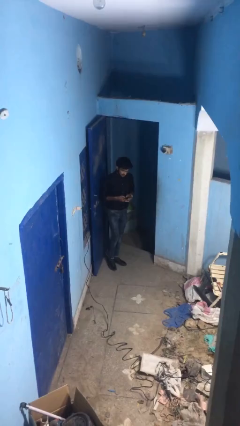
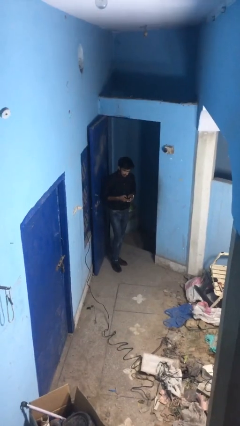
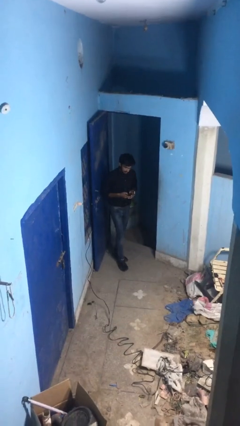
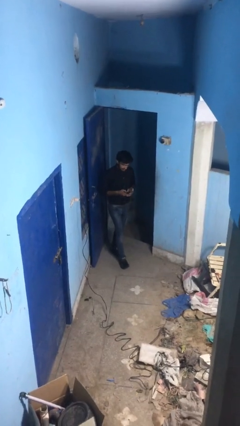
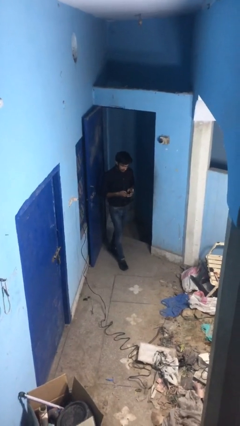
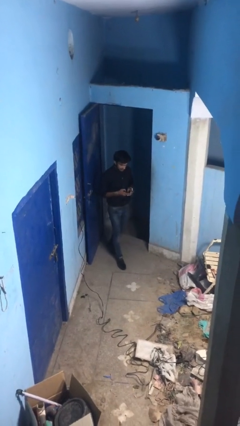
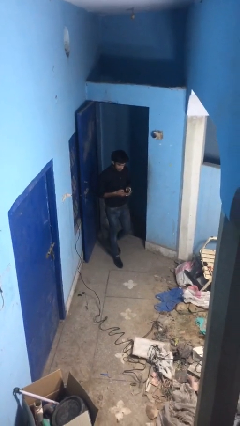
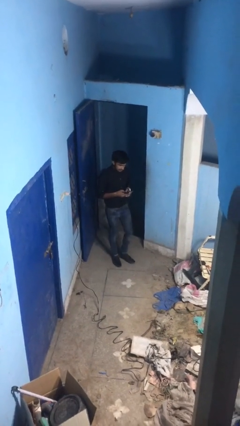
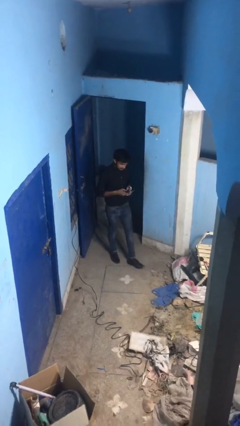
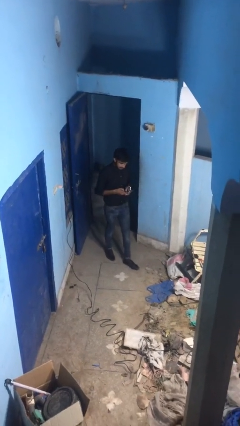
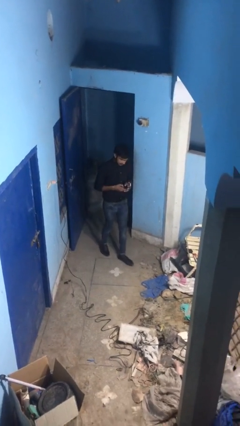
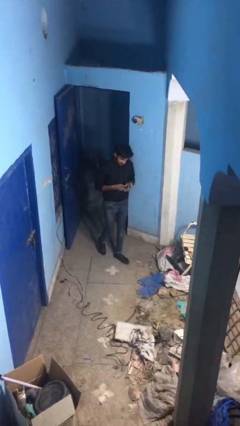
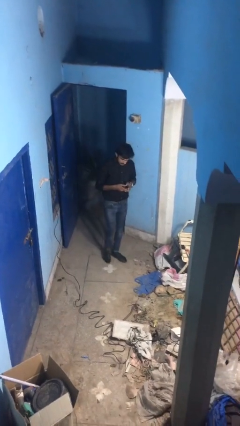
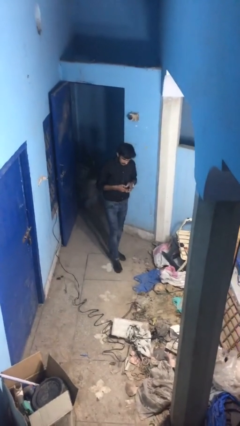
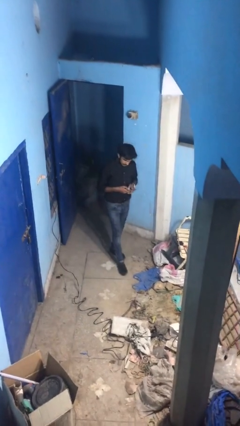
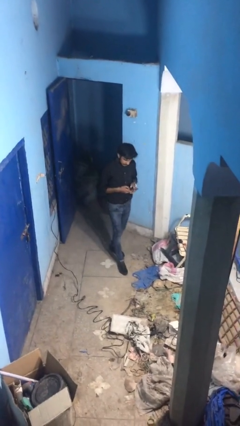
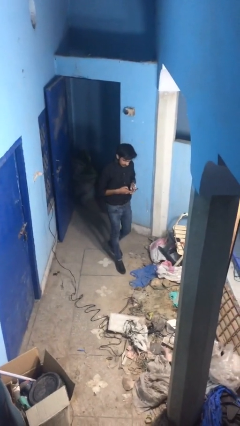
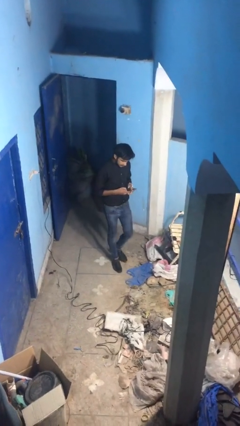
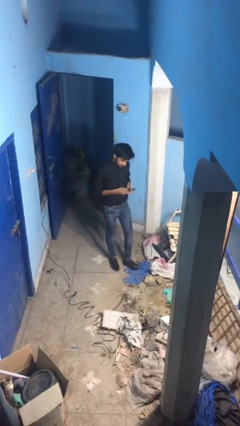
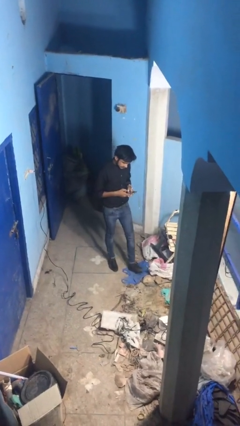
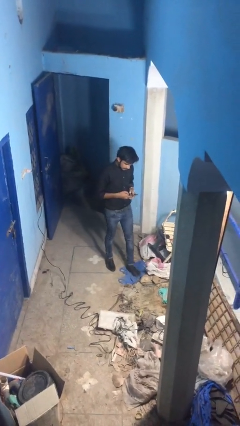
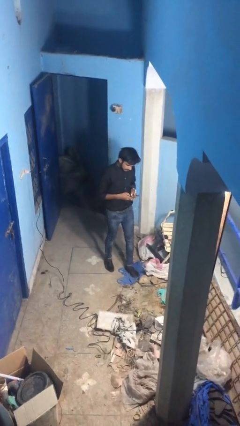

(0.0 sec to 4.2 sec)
person texts on phone

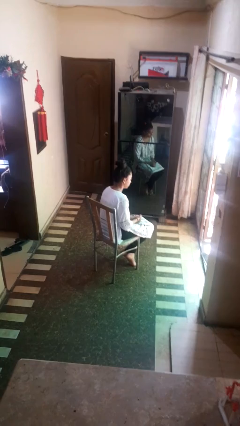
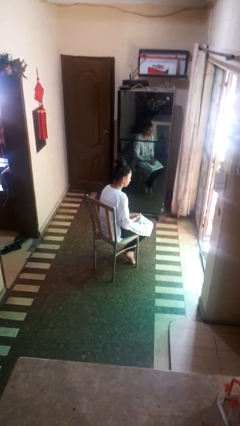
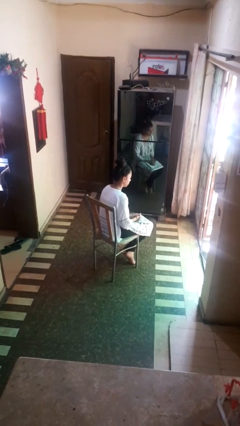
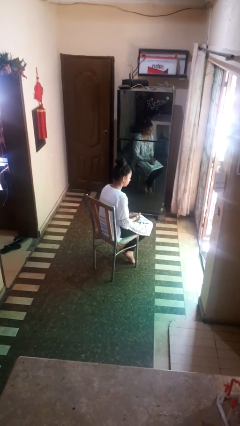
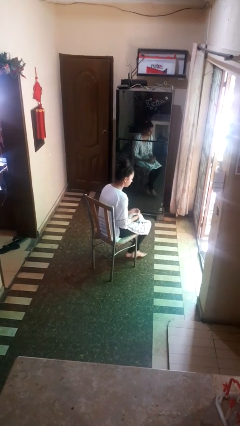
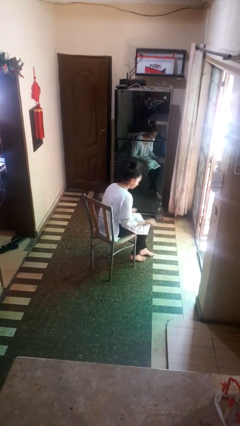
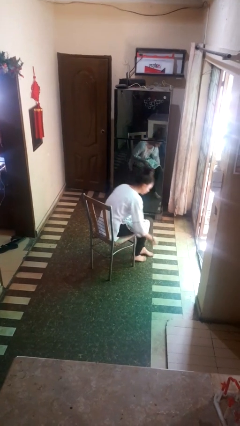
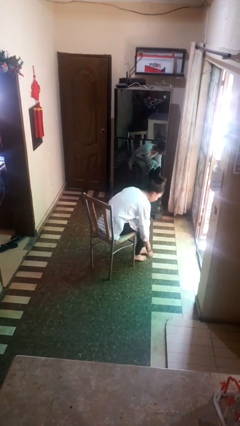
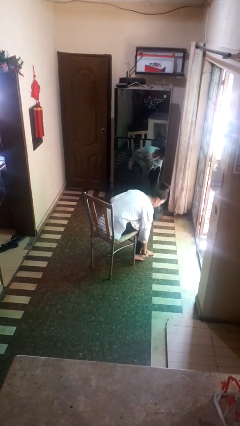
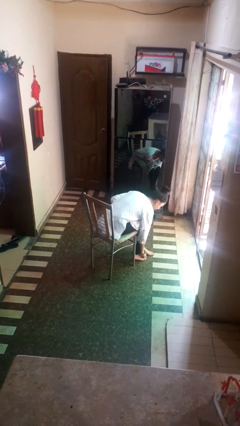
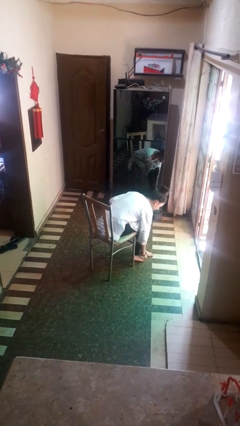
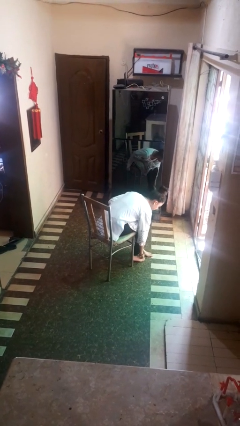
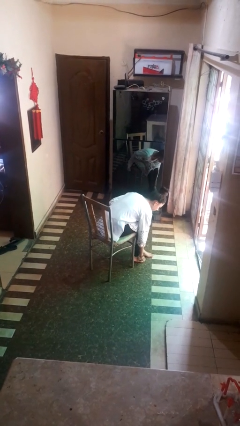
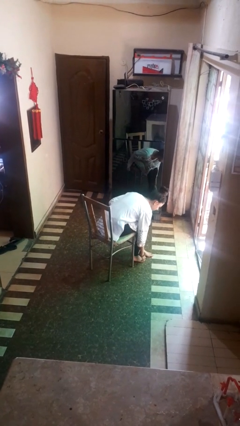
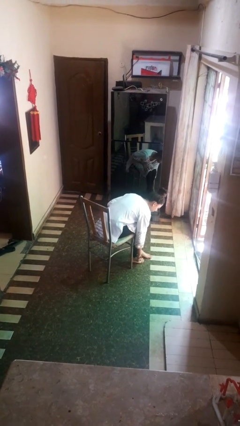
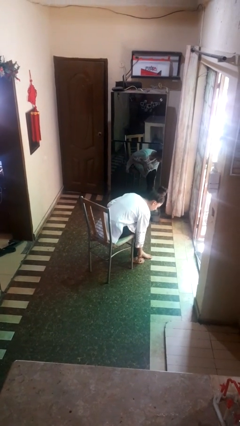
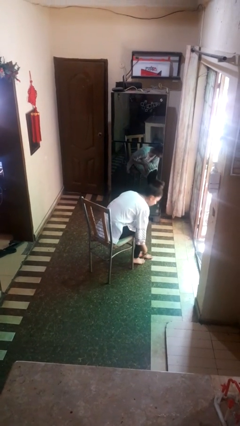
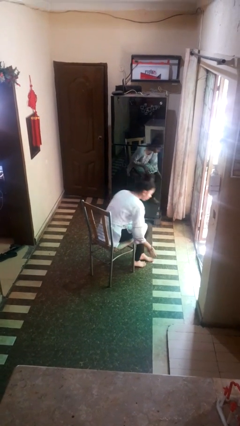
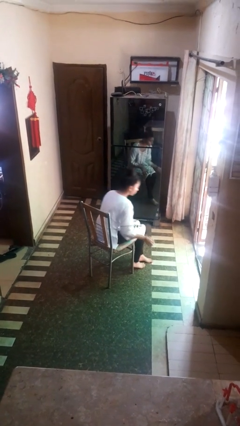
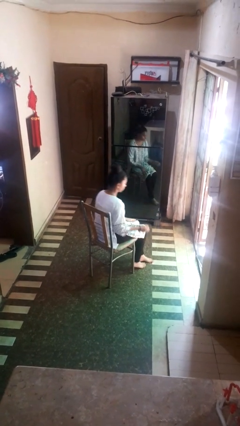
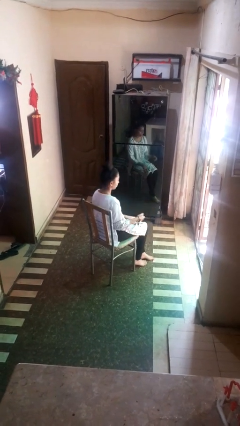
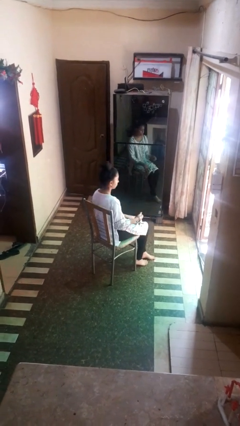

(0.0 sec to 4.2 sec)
person rubs foot

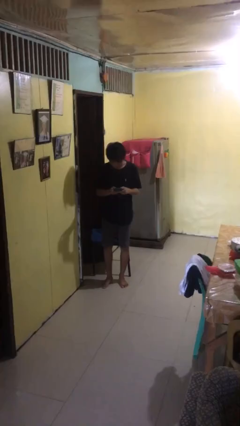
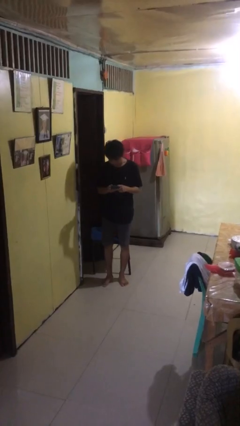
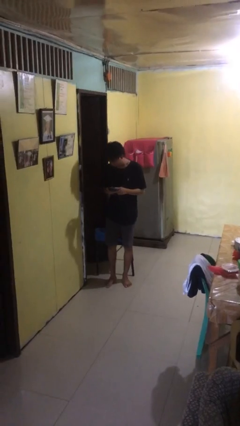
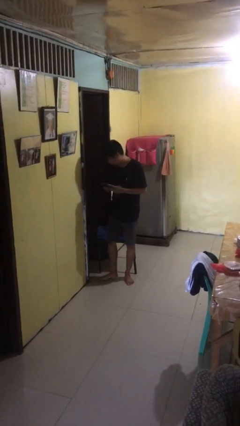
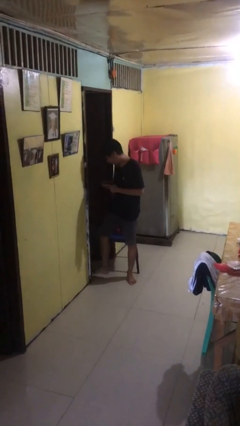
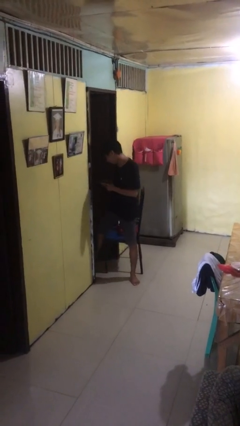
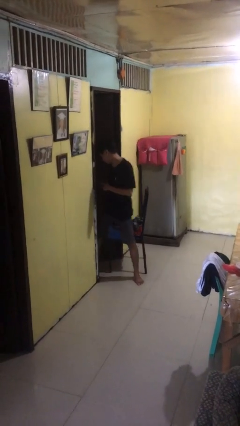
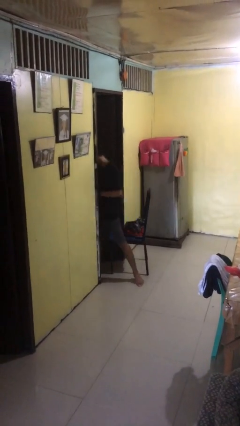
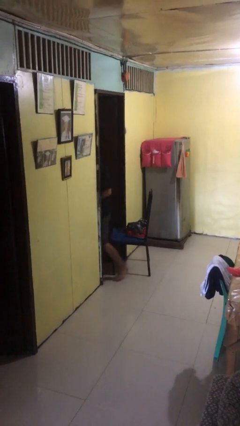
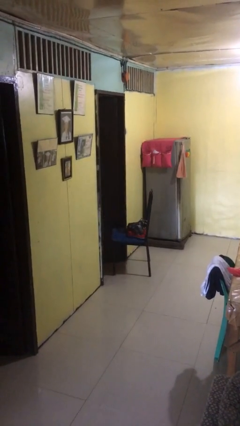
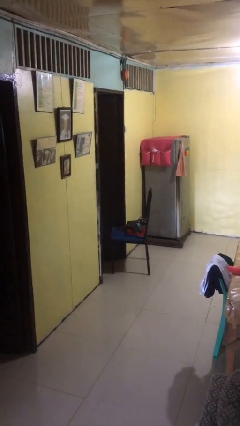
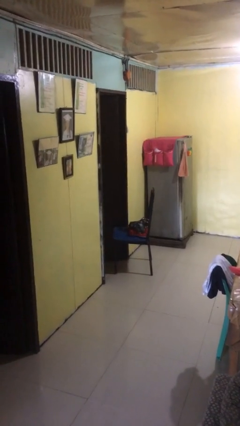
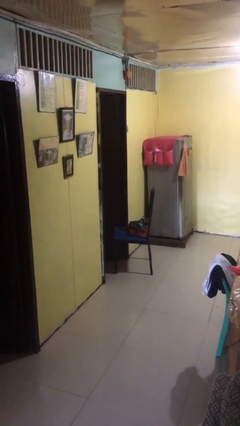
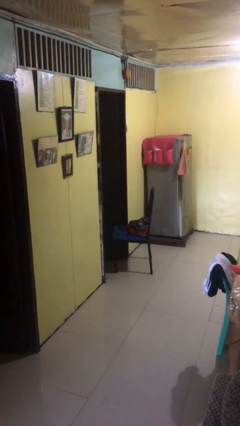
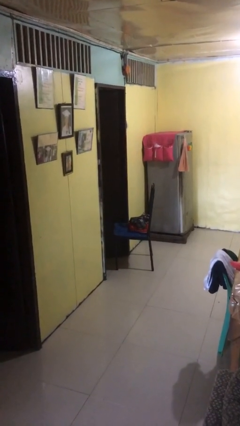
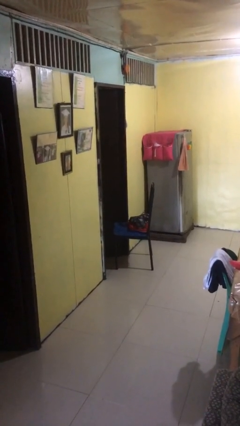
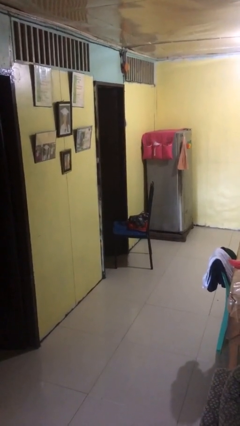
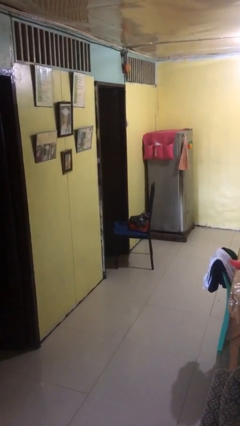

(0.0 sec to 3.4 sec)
person exits scene through structure

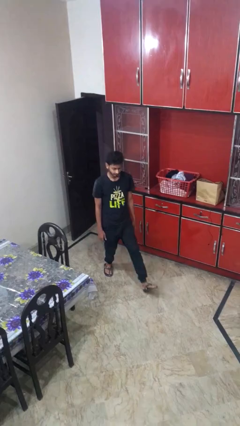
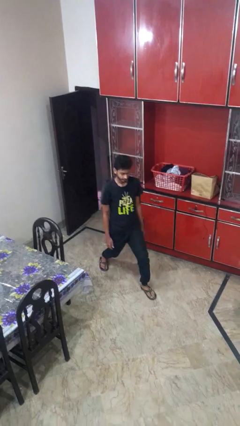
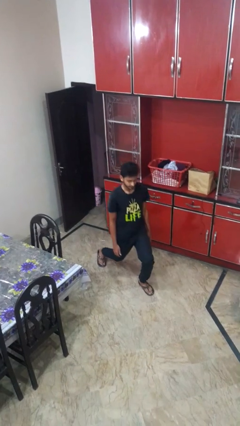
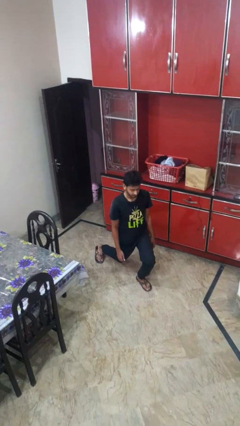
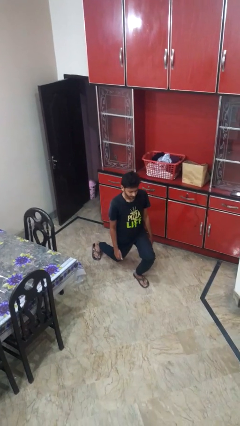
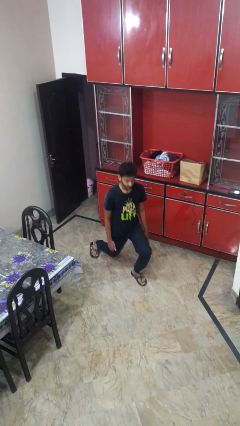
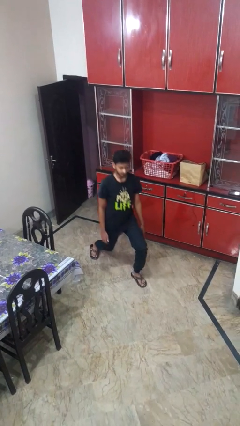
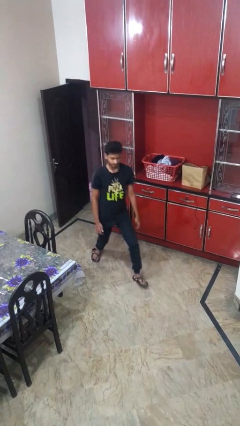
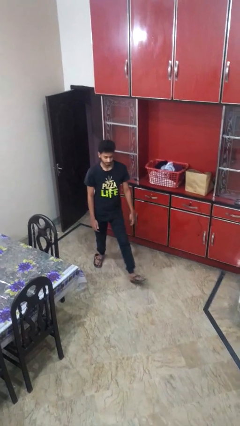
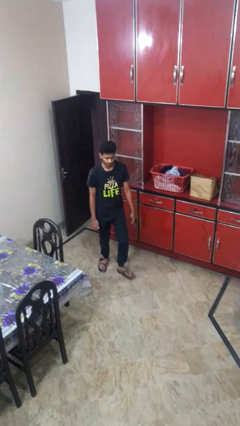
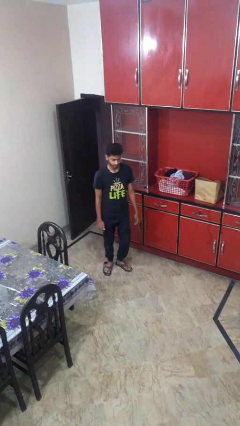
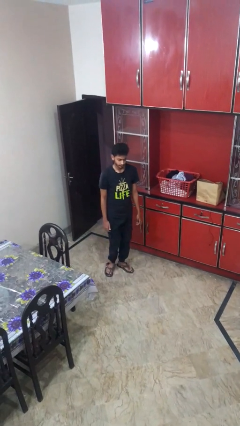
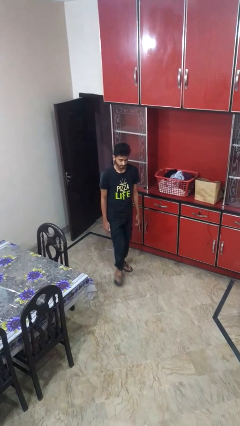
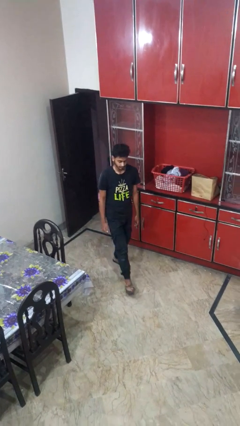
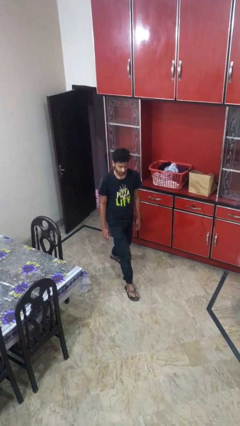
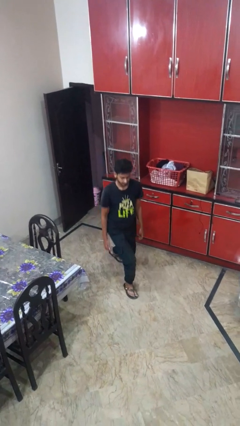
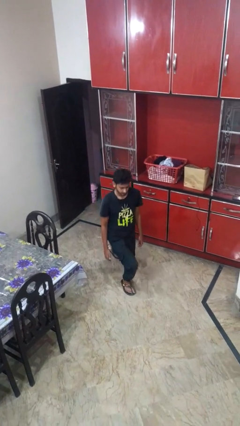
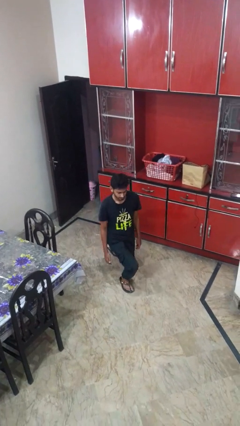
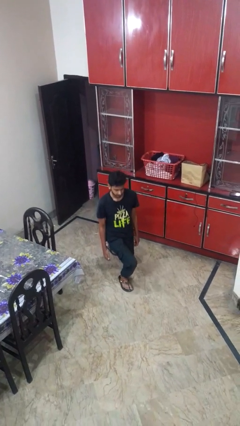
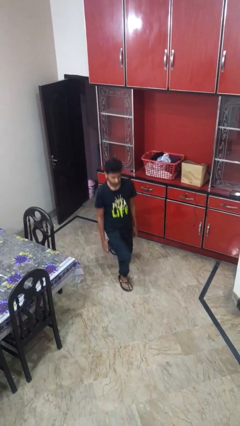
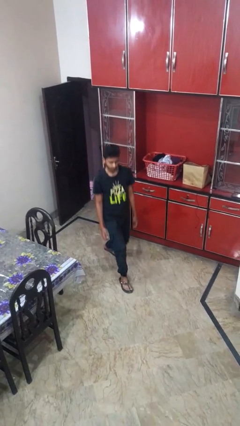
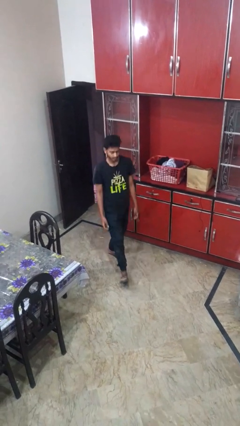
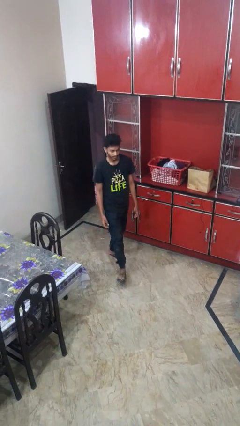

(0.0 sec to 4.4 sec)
person exercises with lunges

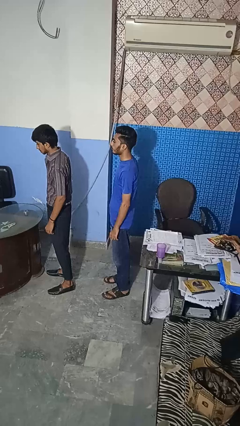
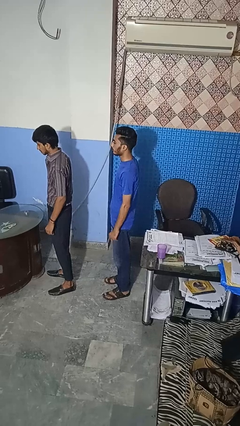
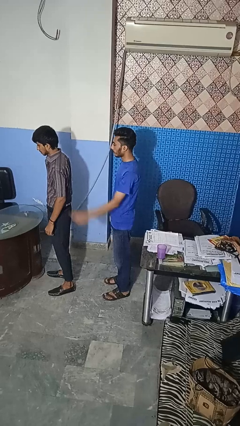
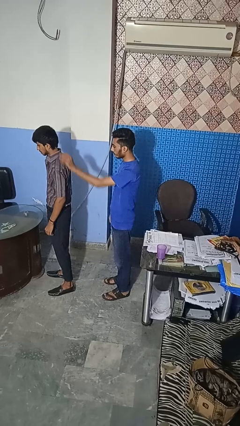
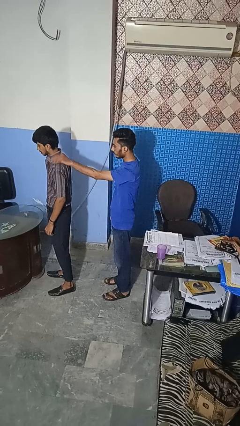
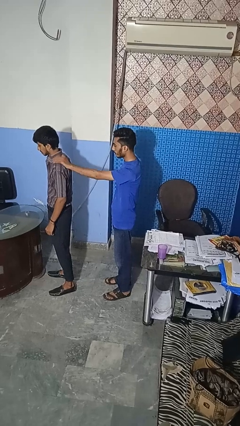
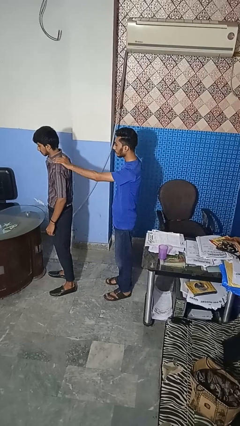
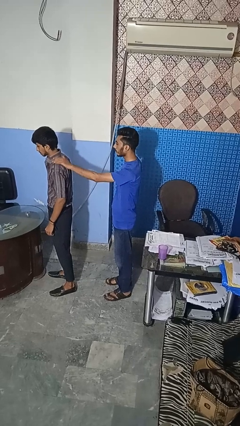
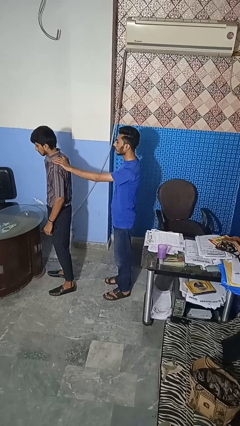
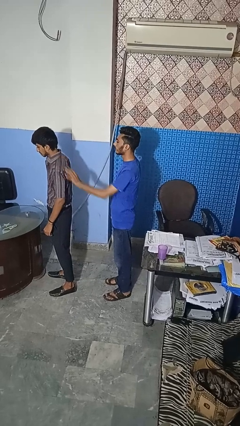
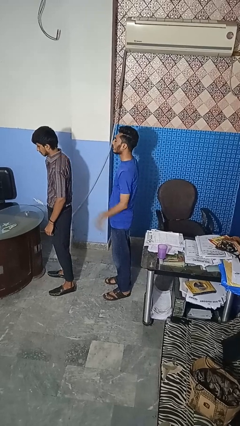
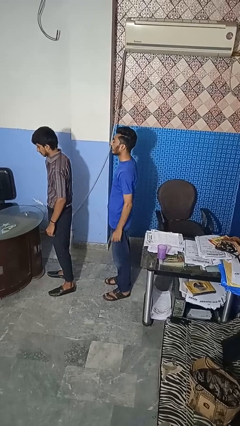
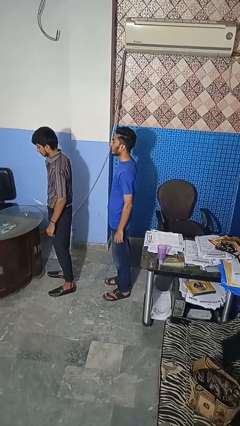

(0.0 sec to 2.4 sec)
person touches back of person
